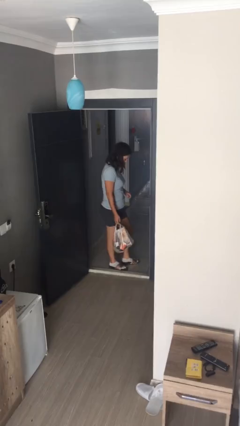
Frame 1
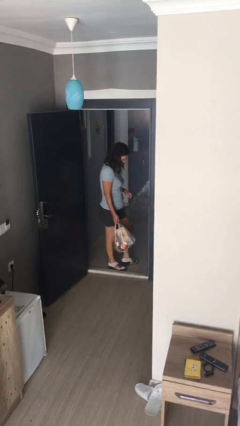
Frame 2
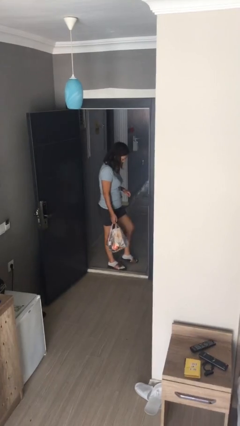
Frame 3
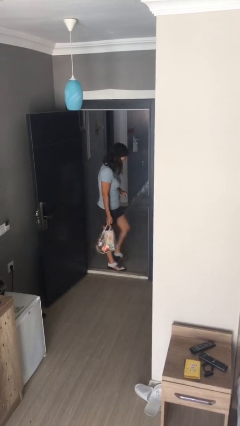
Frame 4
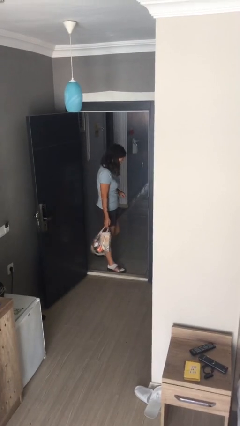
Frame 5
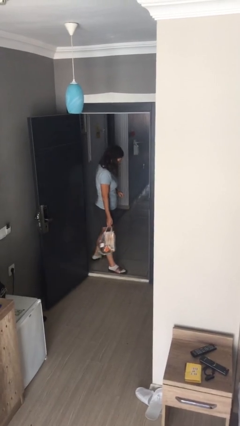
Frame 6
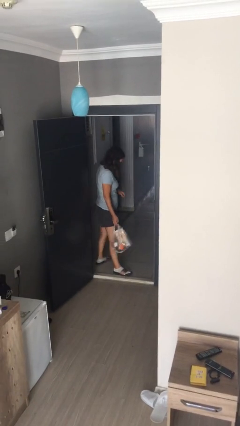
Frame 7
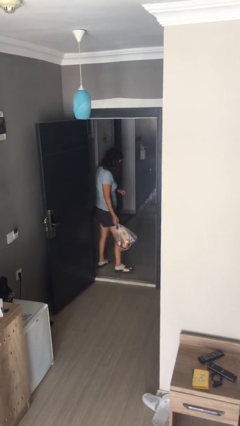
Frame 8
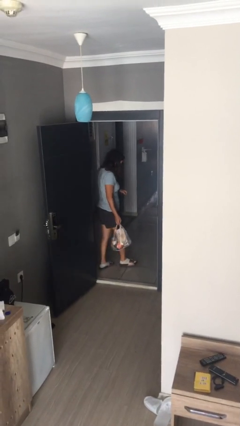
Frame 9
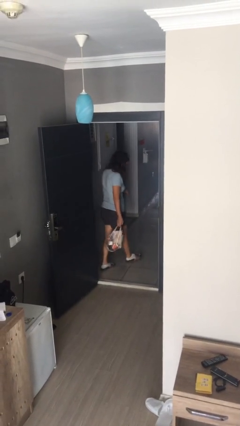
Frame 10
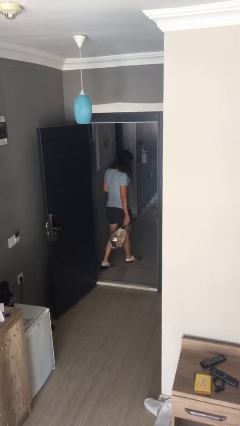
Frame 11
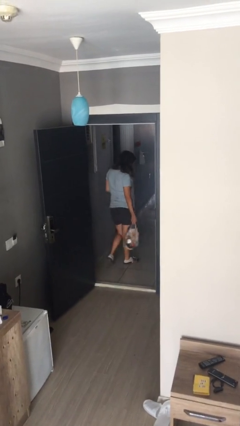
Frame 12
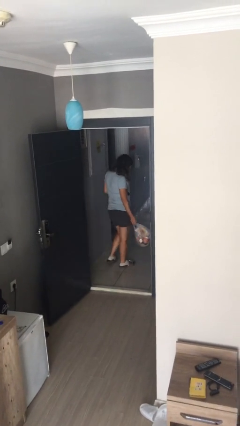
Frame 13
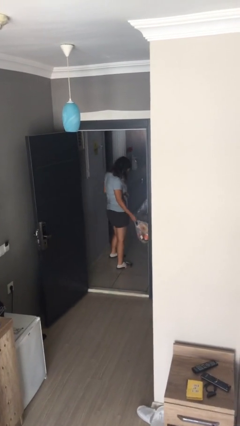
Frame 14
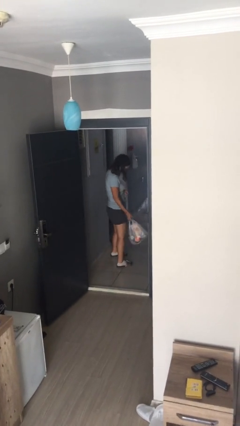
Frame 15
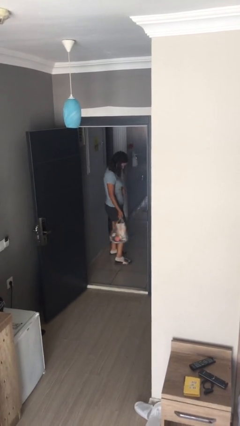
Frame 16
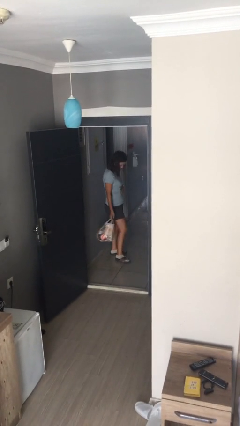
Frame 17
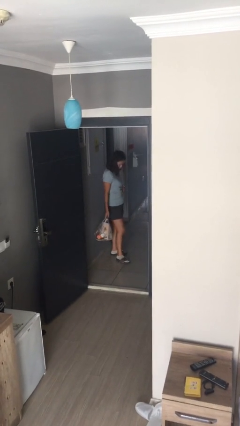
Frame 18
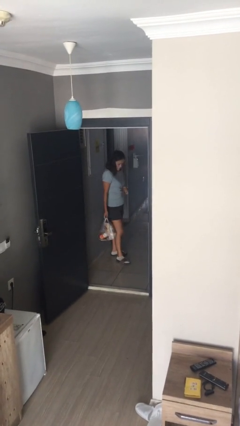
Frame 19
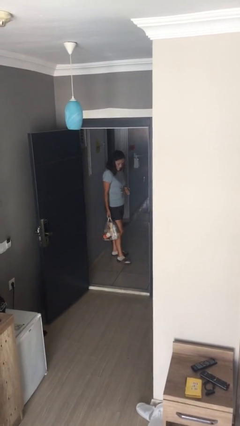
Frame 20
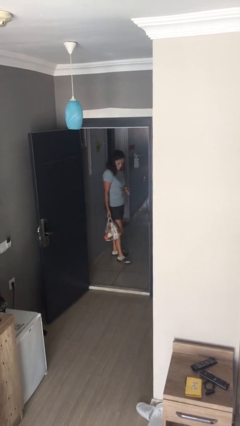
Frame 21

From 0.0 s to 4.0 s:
person carries groceries

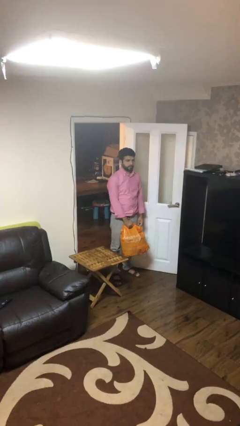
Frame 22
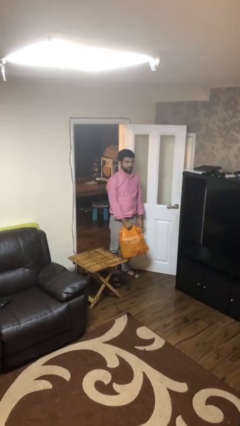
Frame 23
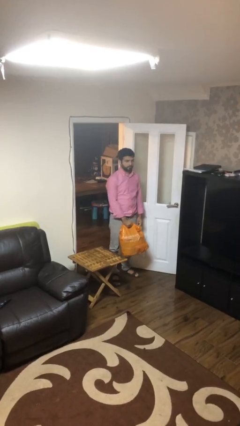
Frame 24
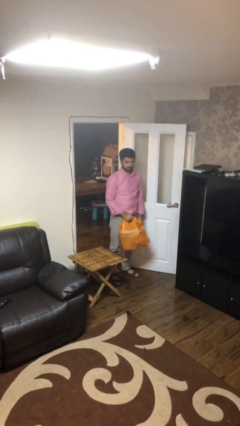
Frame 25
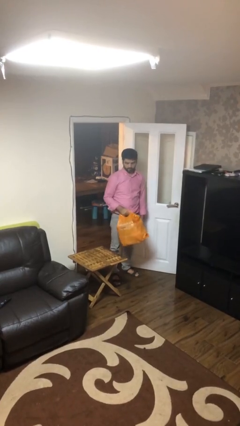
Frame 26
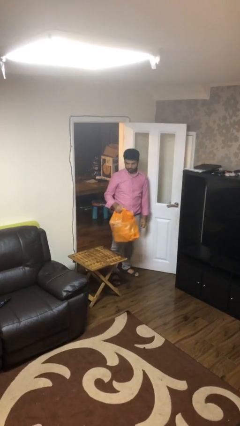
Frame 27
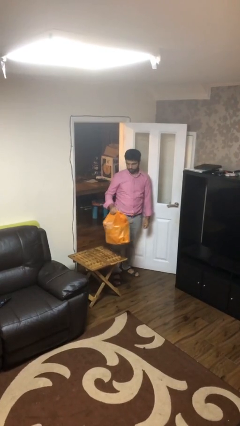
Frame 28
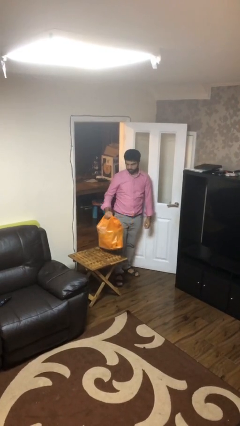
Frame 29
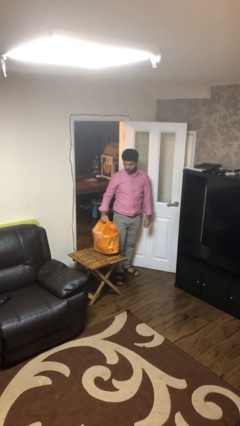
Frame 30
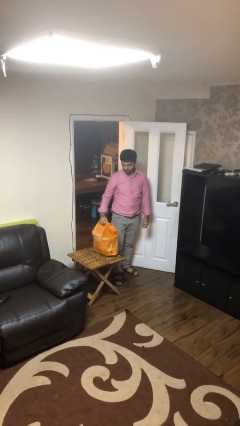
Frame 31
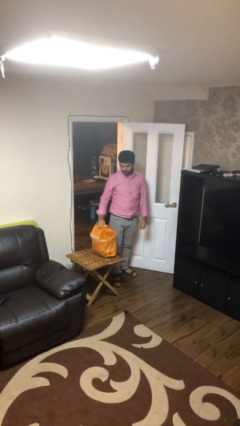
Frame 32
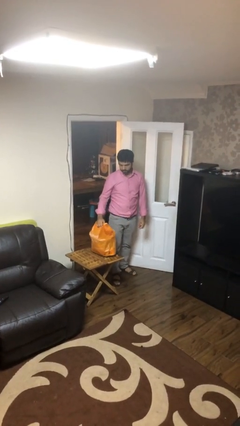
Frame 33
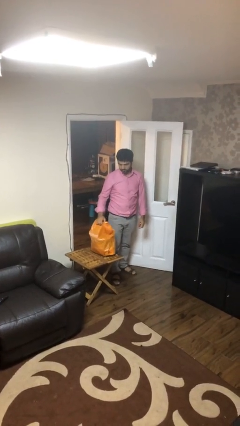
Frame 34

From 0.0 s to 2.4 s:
person puts down object on table

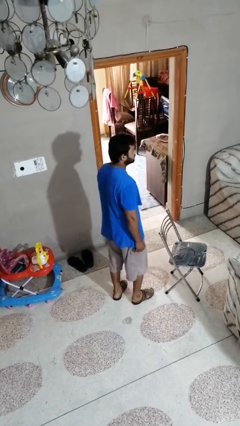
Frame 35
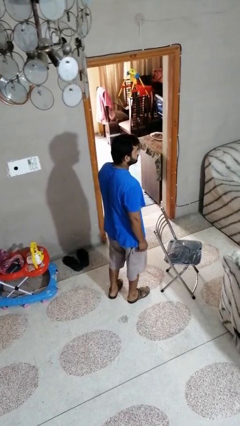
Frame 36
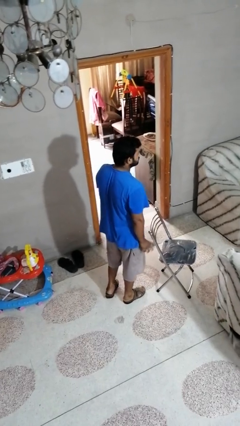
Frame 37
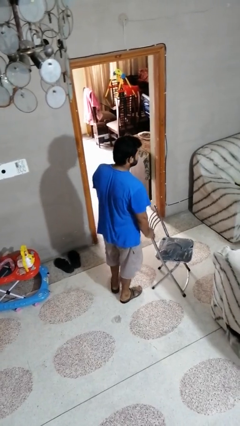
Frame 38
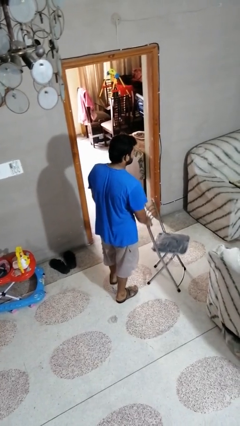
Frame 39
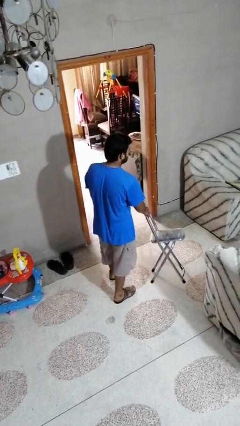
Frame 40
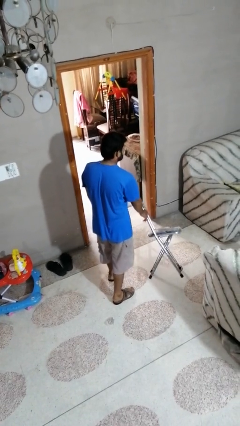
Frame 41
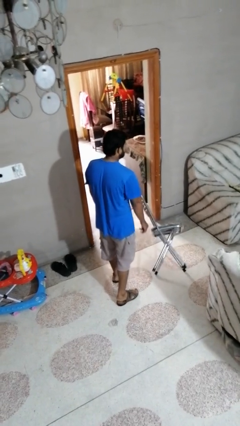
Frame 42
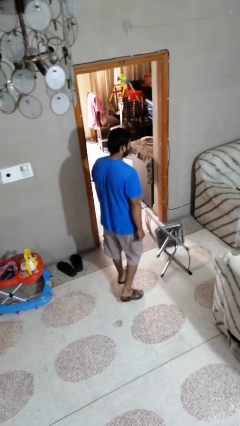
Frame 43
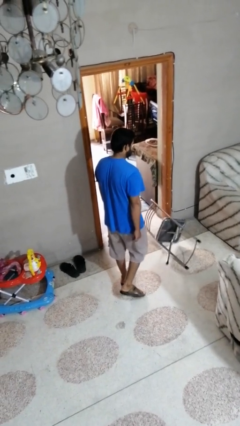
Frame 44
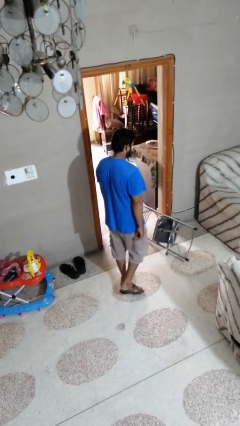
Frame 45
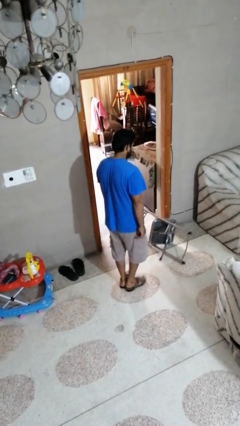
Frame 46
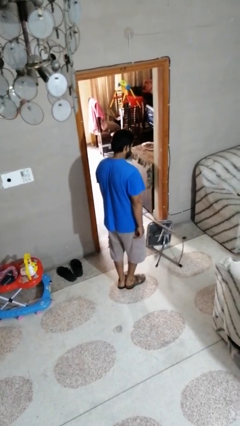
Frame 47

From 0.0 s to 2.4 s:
person knocks over furniture

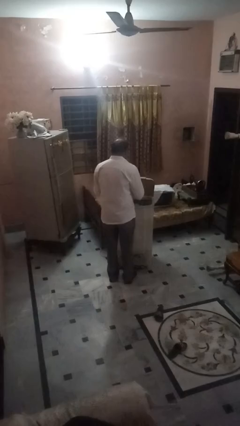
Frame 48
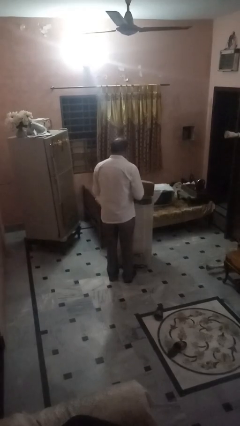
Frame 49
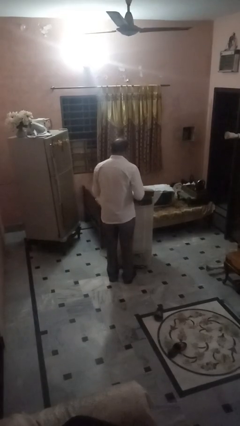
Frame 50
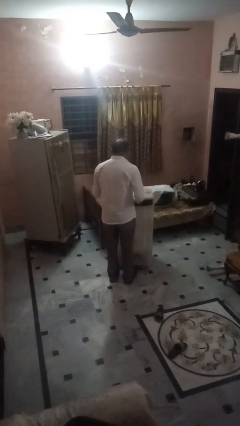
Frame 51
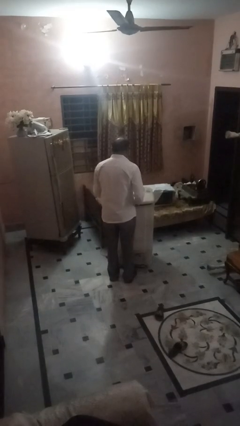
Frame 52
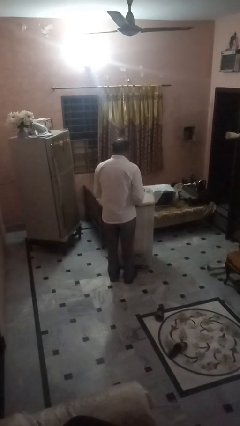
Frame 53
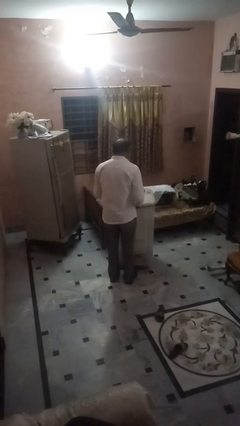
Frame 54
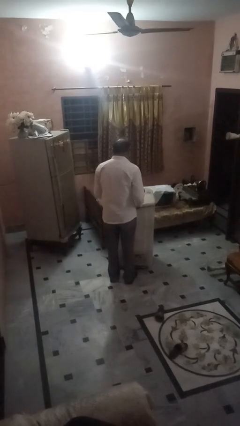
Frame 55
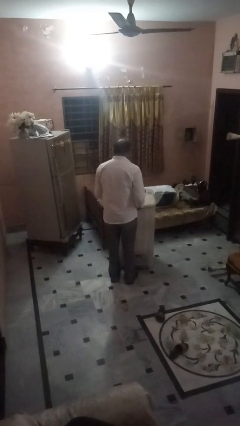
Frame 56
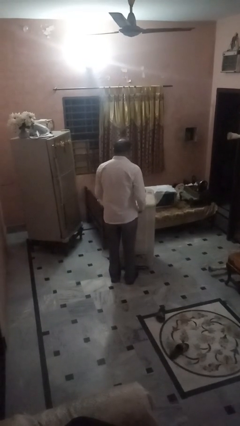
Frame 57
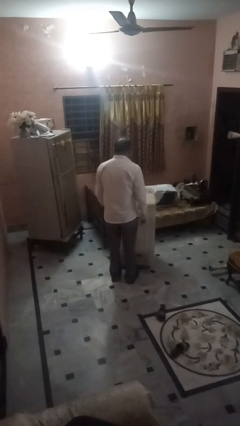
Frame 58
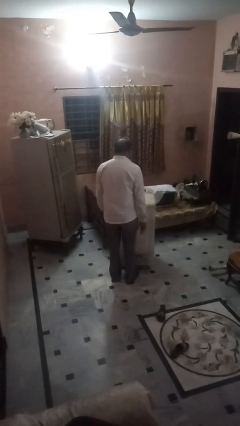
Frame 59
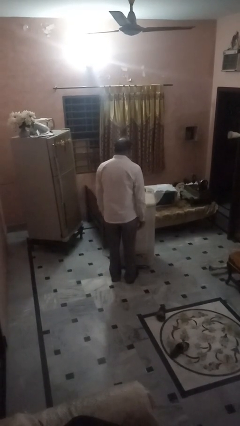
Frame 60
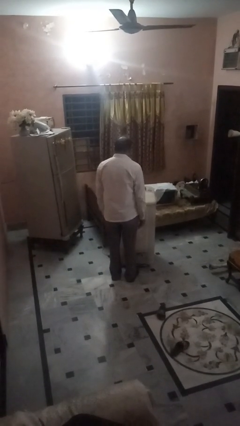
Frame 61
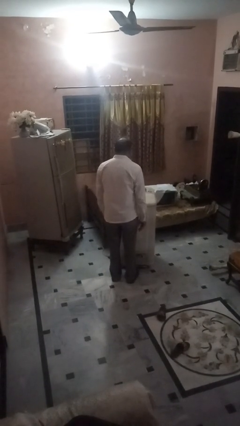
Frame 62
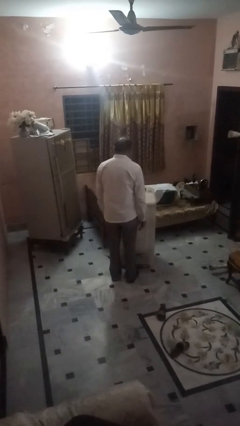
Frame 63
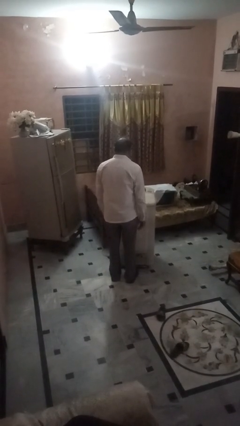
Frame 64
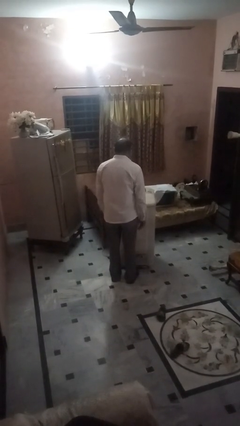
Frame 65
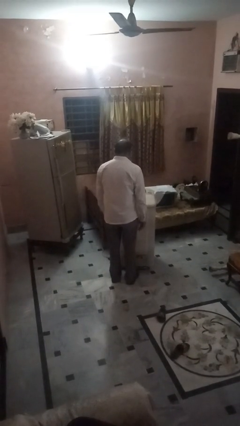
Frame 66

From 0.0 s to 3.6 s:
person closes clothes washer

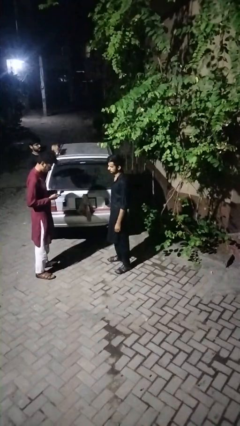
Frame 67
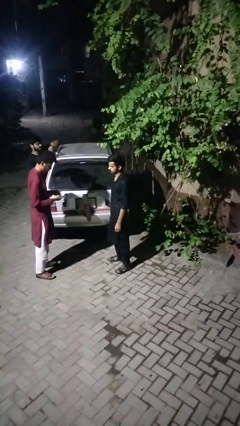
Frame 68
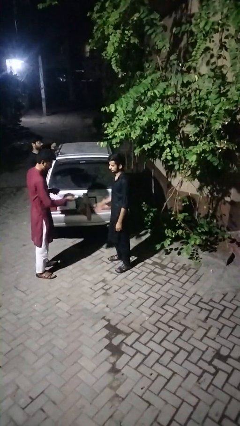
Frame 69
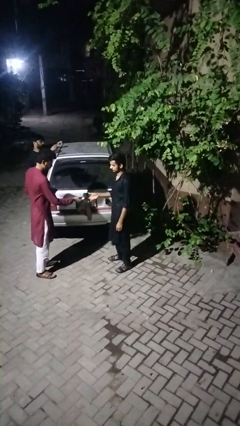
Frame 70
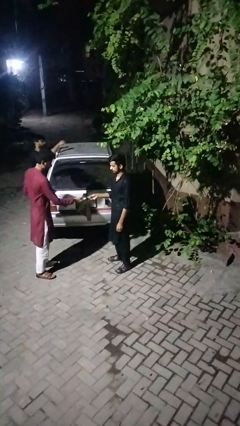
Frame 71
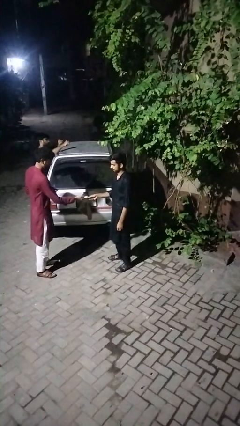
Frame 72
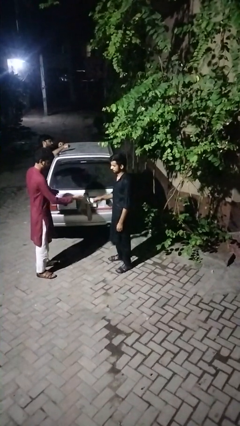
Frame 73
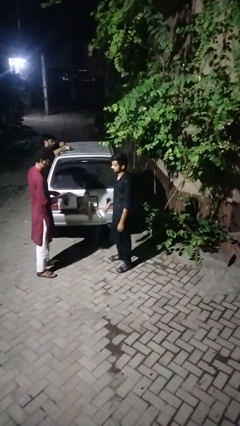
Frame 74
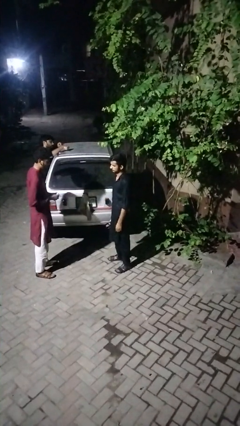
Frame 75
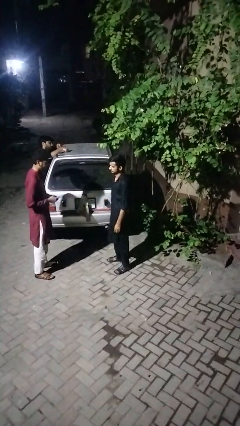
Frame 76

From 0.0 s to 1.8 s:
person transfers object to person

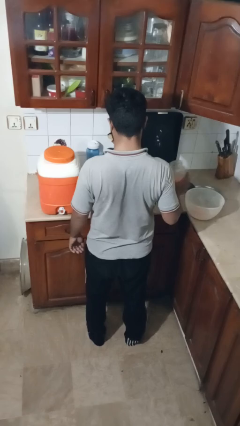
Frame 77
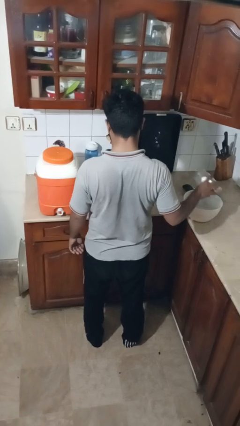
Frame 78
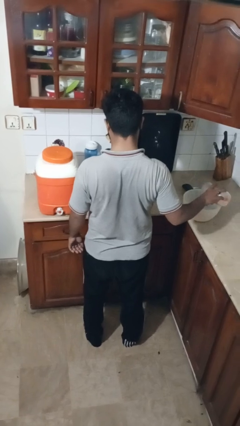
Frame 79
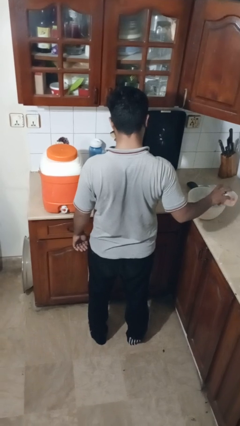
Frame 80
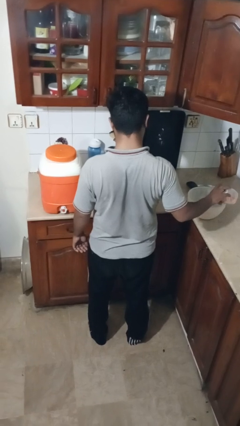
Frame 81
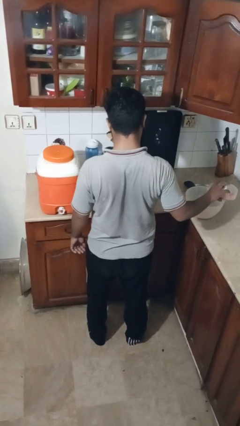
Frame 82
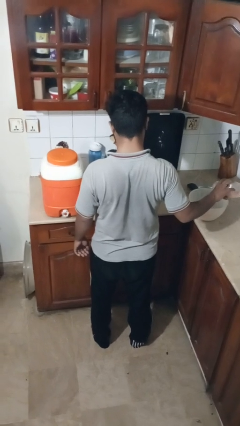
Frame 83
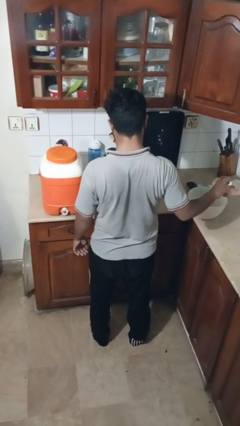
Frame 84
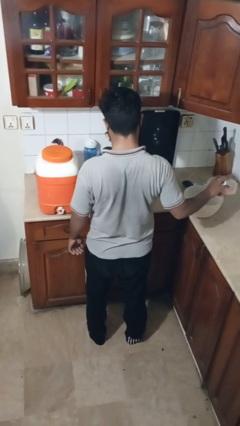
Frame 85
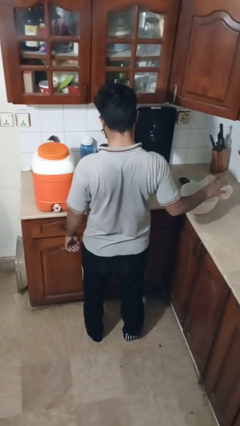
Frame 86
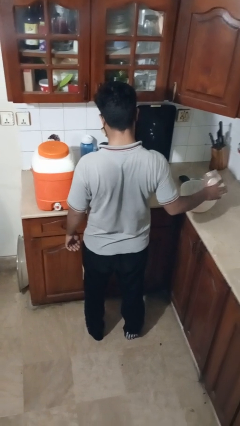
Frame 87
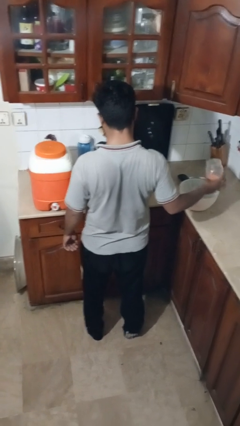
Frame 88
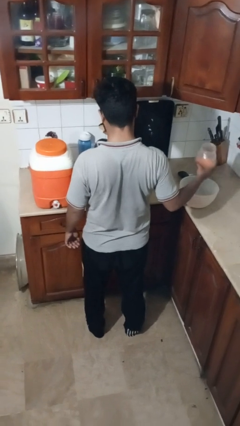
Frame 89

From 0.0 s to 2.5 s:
person pours into bowl

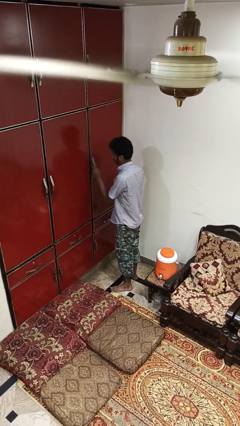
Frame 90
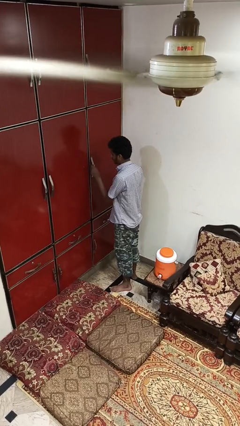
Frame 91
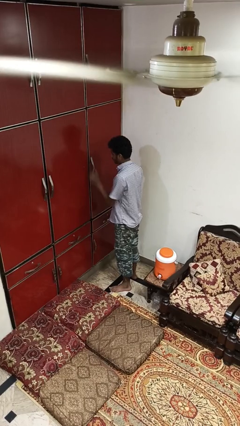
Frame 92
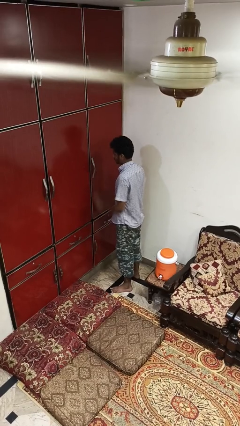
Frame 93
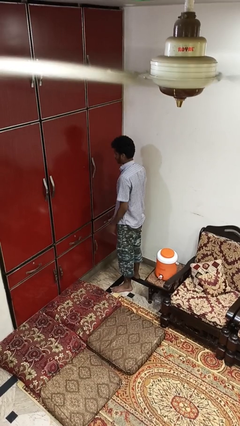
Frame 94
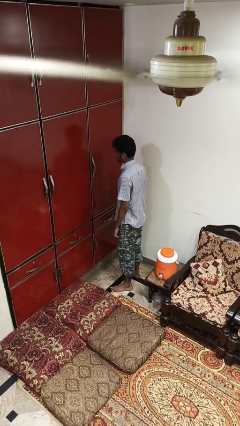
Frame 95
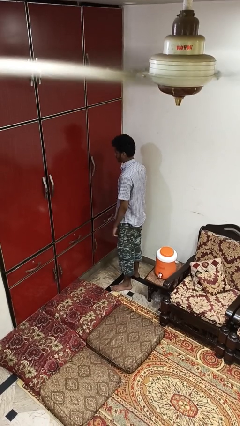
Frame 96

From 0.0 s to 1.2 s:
person closes cabinet
